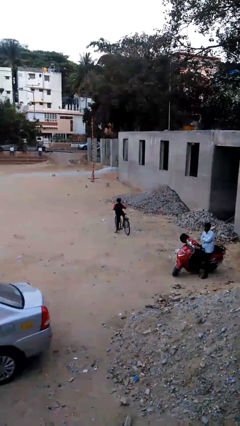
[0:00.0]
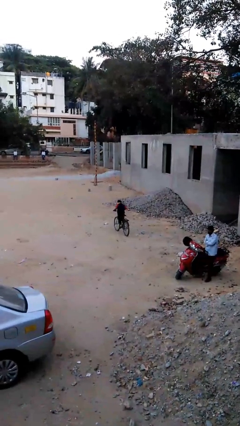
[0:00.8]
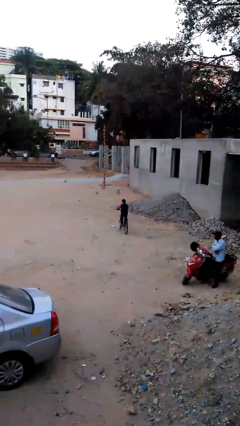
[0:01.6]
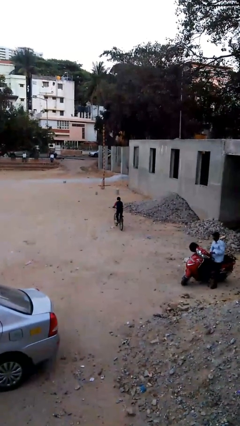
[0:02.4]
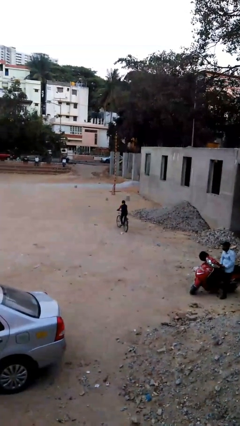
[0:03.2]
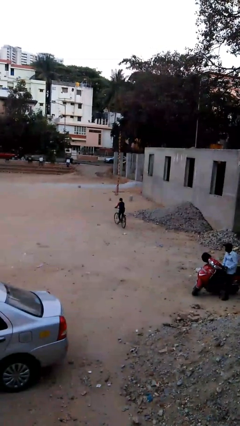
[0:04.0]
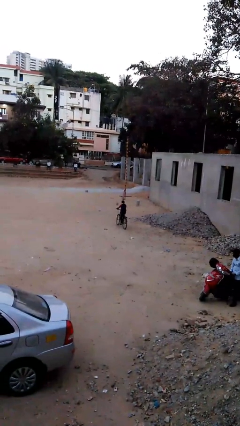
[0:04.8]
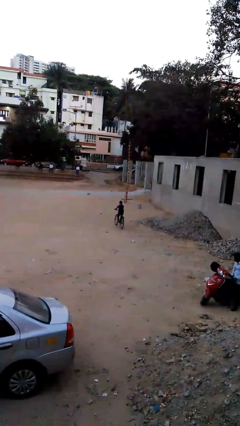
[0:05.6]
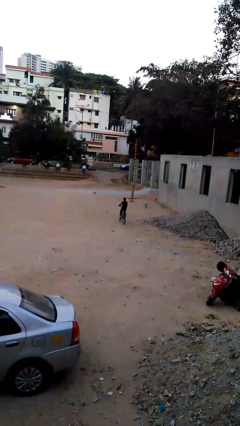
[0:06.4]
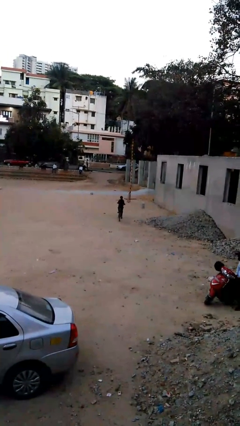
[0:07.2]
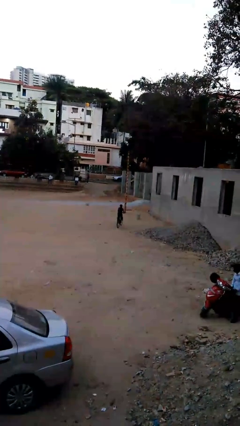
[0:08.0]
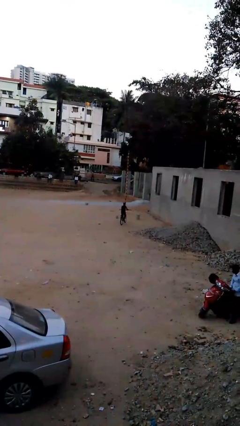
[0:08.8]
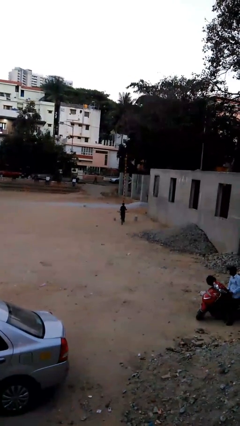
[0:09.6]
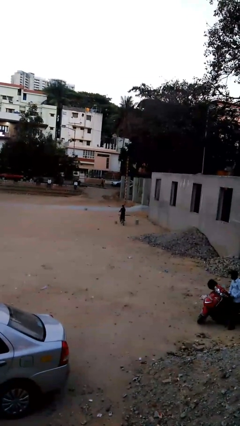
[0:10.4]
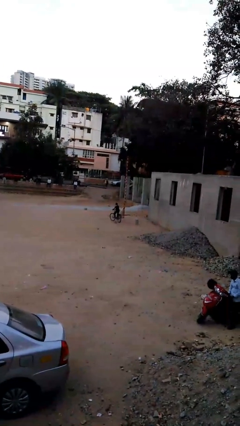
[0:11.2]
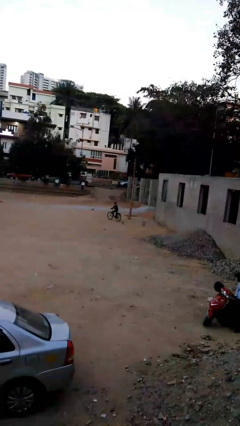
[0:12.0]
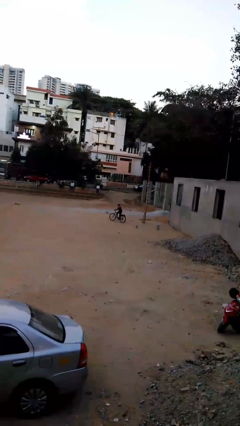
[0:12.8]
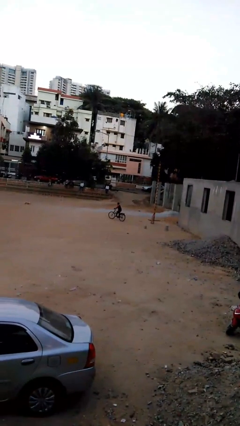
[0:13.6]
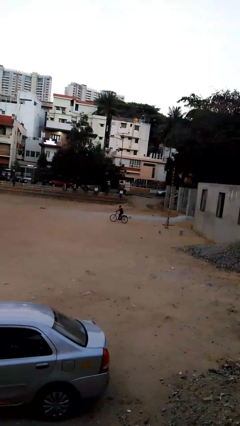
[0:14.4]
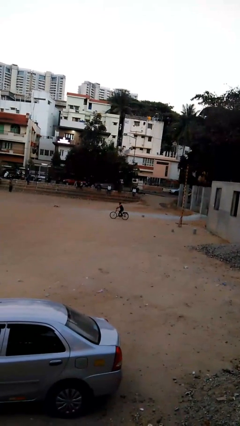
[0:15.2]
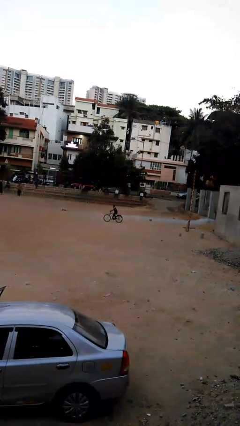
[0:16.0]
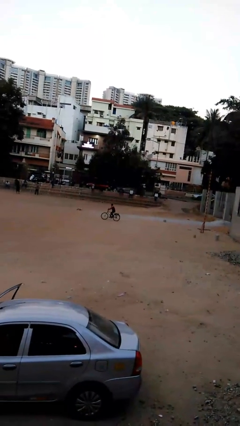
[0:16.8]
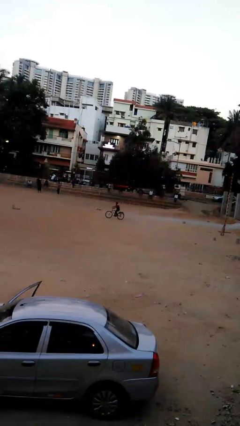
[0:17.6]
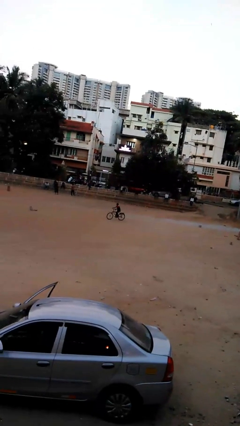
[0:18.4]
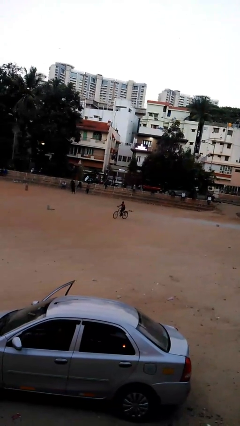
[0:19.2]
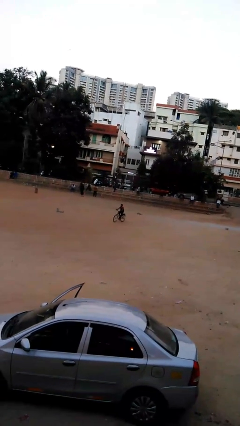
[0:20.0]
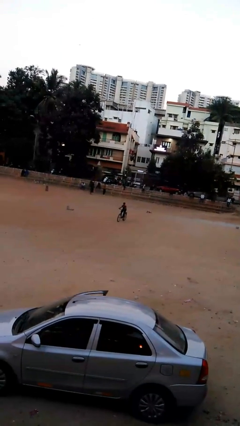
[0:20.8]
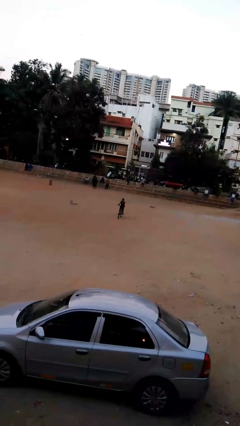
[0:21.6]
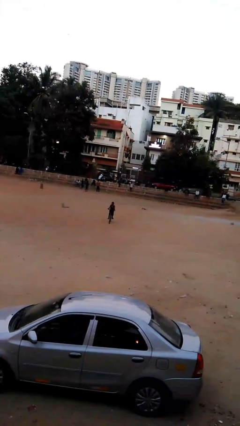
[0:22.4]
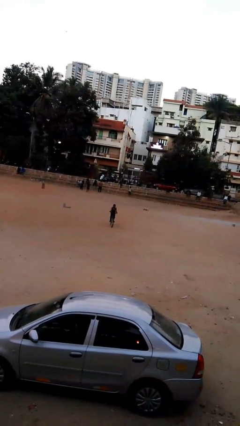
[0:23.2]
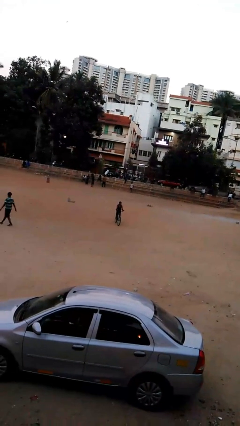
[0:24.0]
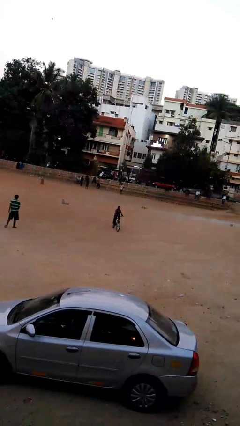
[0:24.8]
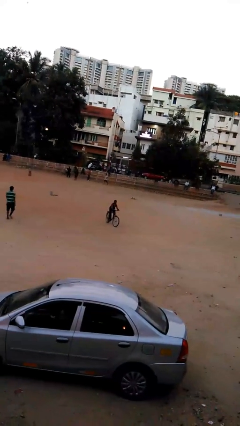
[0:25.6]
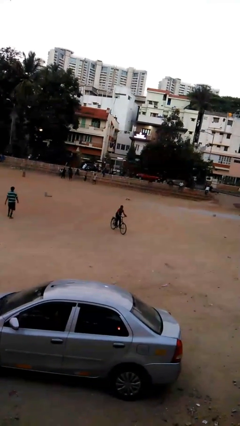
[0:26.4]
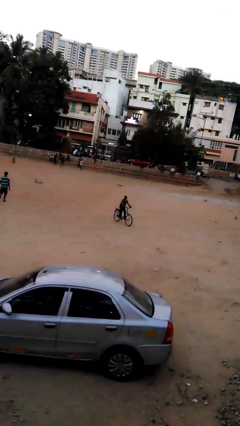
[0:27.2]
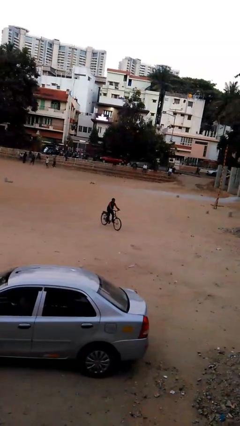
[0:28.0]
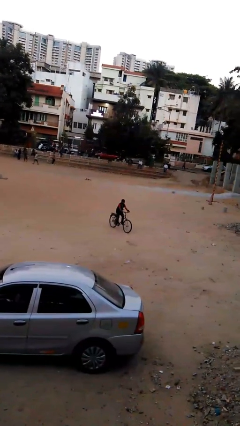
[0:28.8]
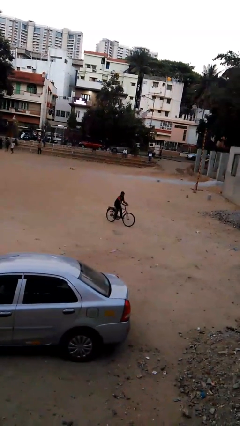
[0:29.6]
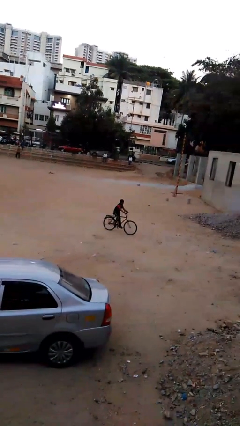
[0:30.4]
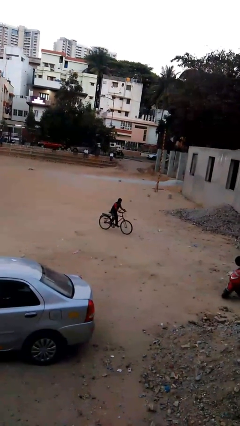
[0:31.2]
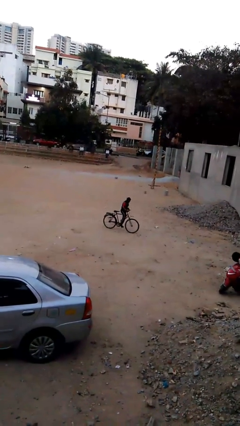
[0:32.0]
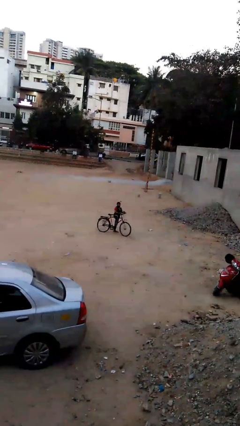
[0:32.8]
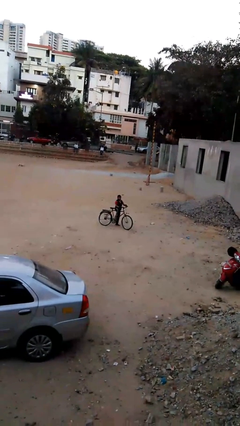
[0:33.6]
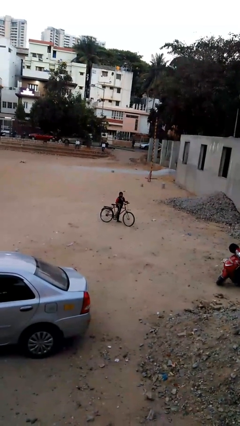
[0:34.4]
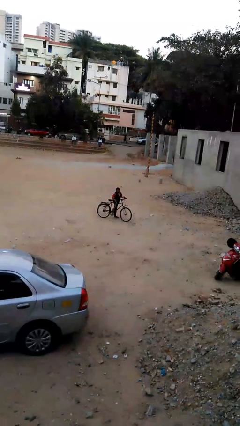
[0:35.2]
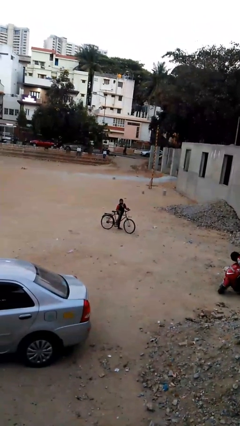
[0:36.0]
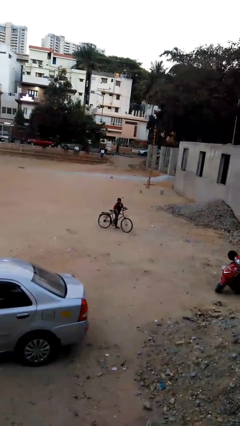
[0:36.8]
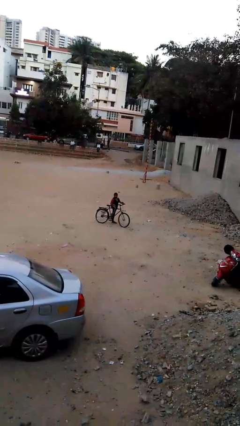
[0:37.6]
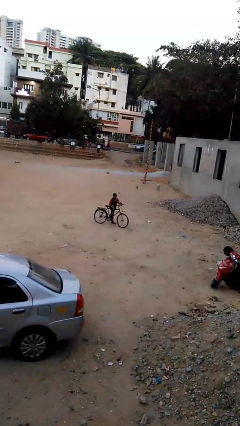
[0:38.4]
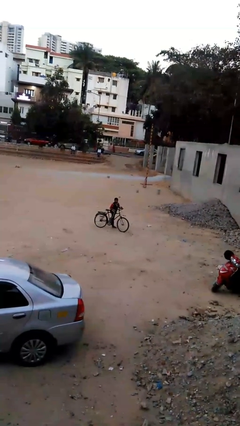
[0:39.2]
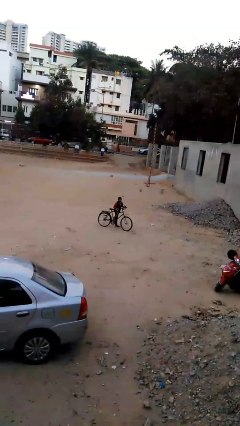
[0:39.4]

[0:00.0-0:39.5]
person rides bicycle

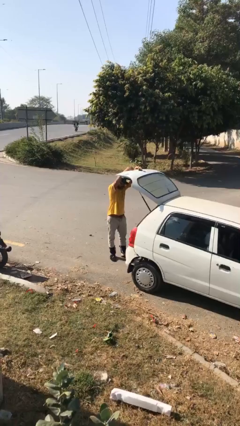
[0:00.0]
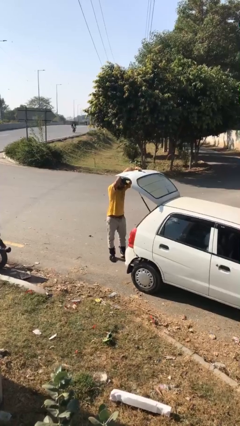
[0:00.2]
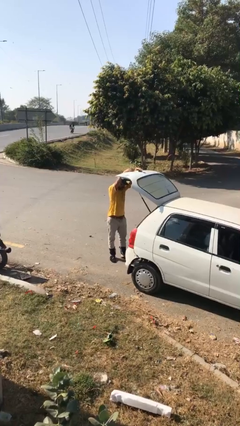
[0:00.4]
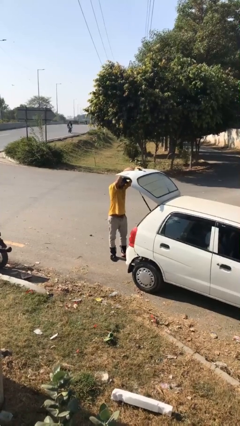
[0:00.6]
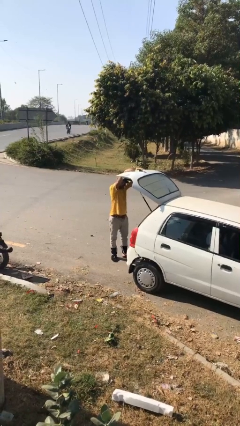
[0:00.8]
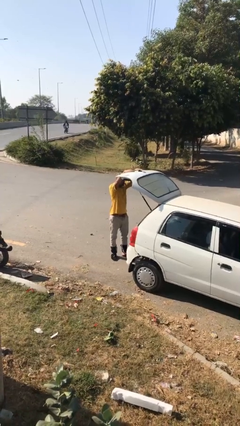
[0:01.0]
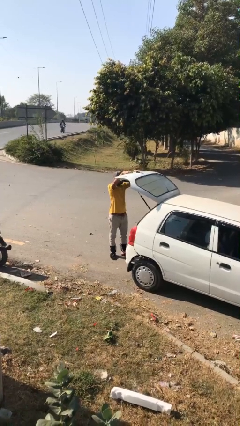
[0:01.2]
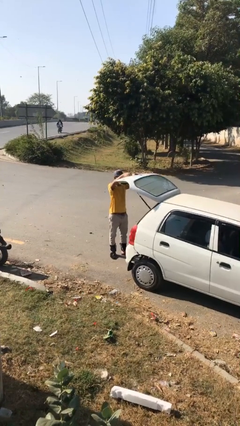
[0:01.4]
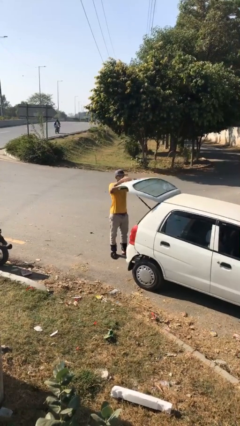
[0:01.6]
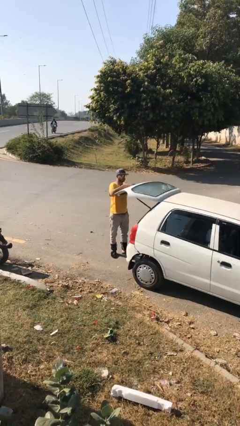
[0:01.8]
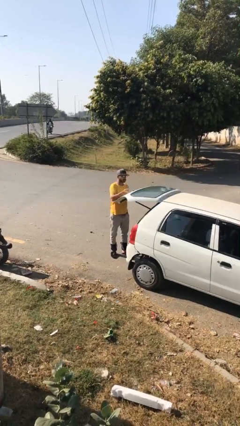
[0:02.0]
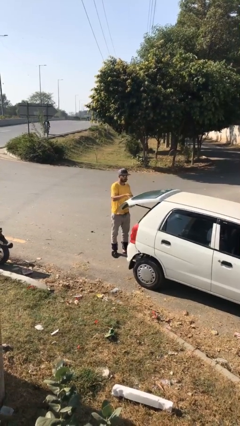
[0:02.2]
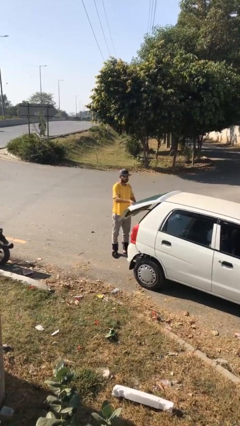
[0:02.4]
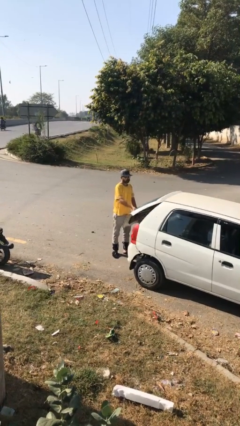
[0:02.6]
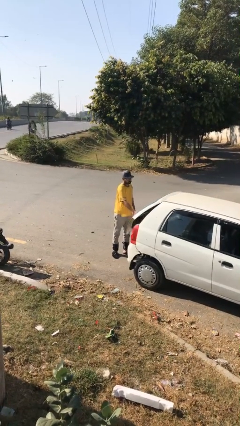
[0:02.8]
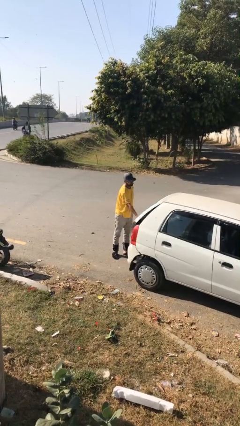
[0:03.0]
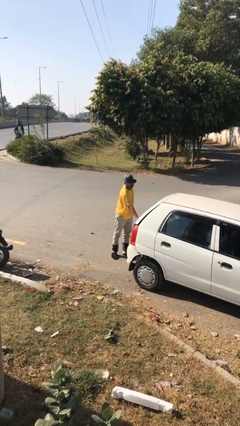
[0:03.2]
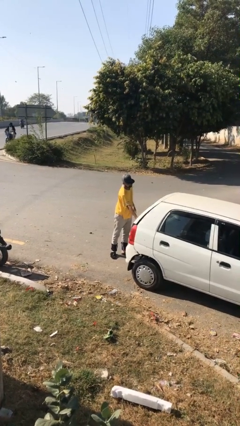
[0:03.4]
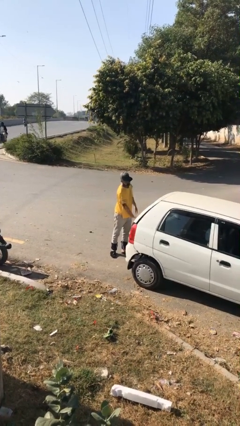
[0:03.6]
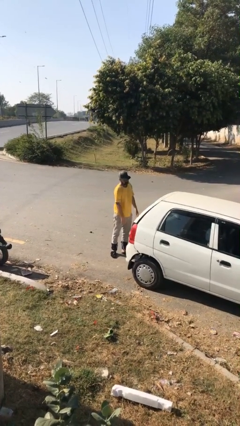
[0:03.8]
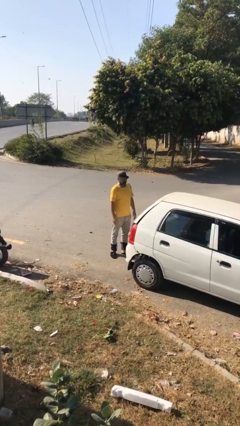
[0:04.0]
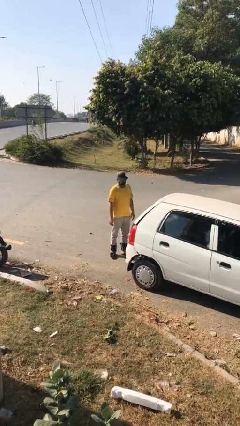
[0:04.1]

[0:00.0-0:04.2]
person closes car trunk

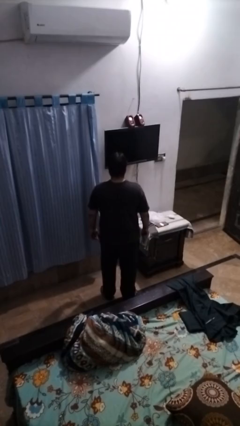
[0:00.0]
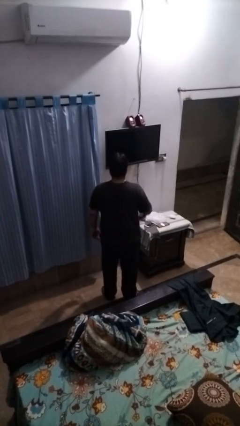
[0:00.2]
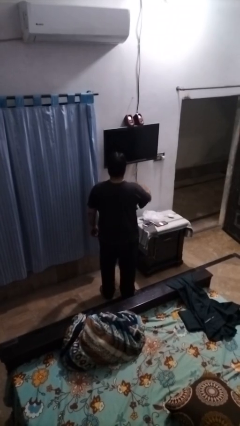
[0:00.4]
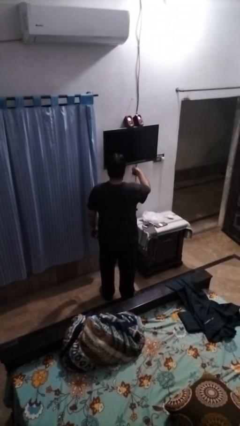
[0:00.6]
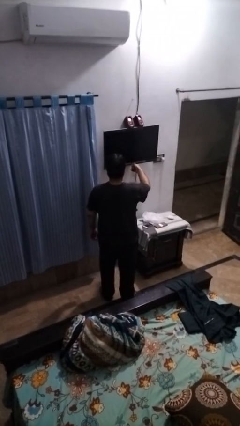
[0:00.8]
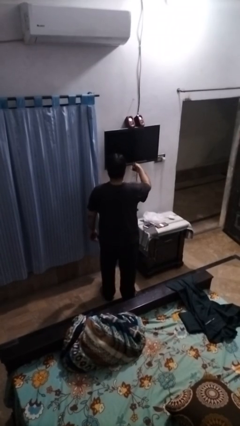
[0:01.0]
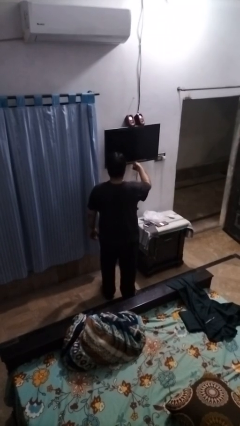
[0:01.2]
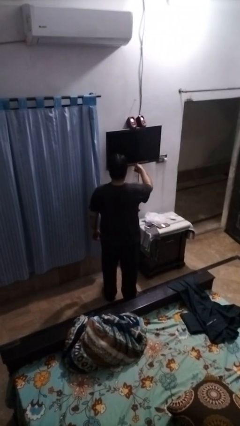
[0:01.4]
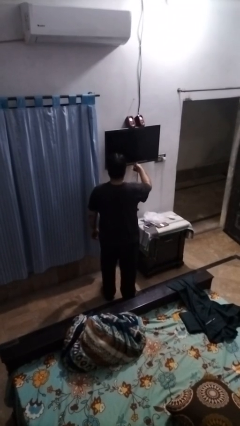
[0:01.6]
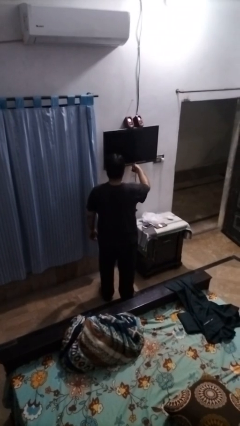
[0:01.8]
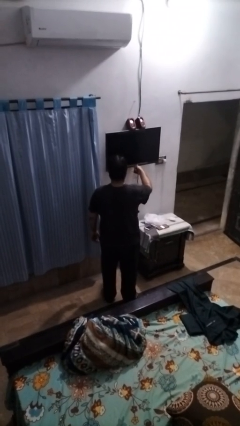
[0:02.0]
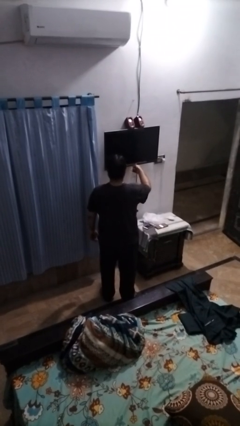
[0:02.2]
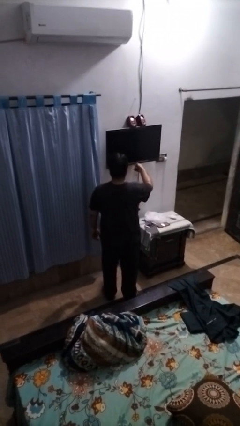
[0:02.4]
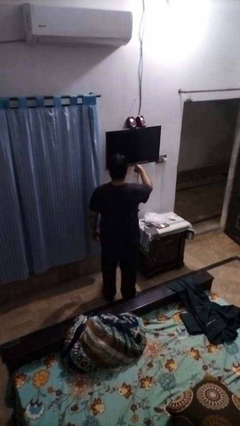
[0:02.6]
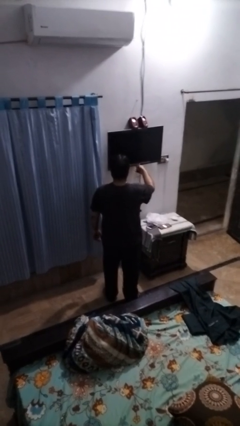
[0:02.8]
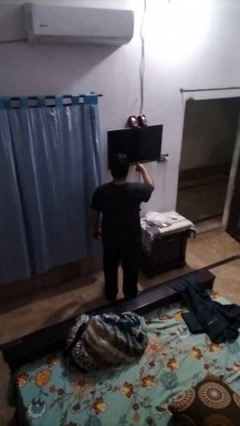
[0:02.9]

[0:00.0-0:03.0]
person uses television remote

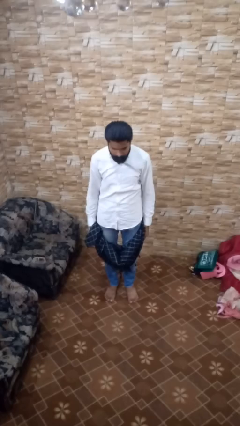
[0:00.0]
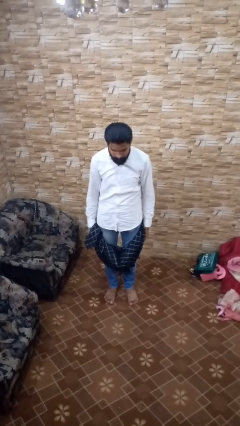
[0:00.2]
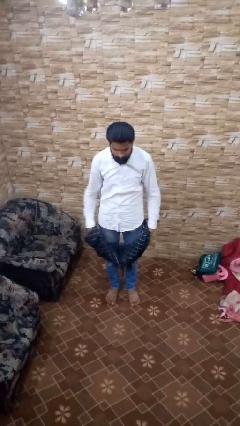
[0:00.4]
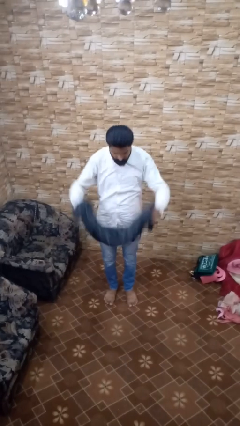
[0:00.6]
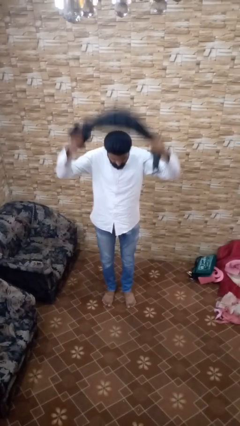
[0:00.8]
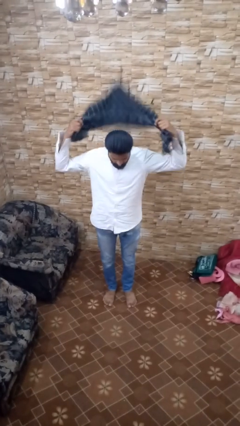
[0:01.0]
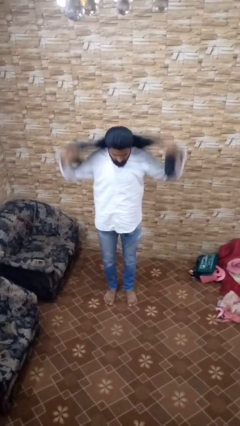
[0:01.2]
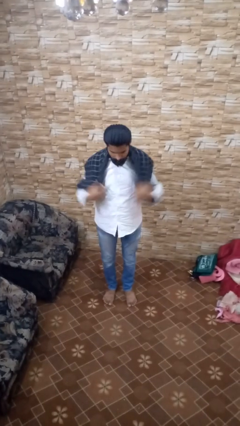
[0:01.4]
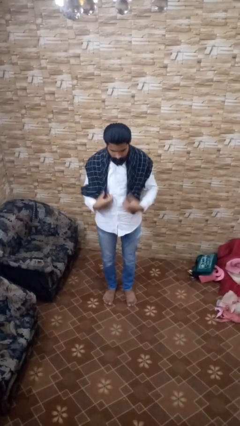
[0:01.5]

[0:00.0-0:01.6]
person puts on scarf
